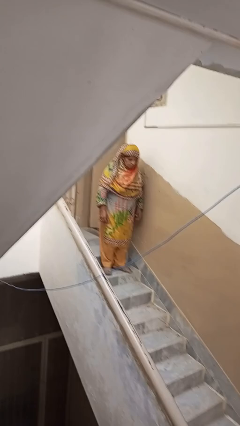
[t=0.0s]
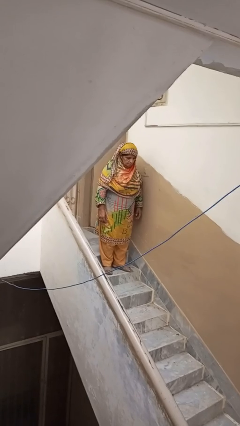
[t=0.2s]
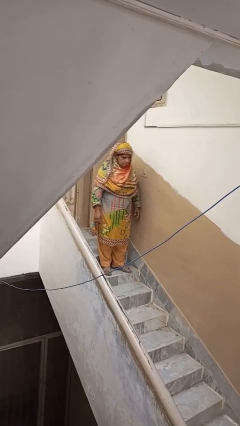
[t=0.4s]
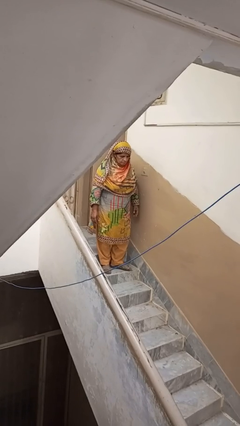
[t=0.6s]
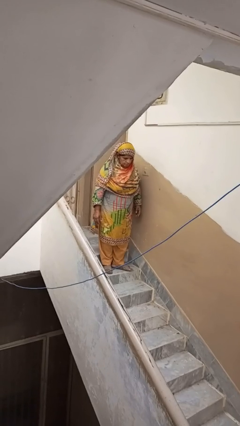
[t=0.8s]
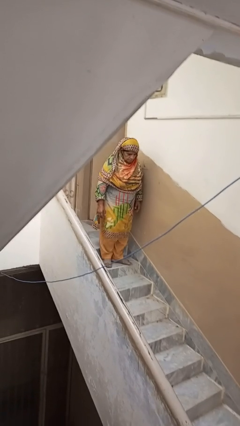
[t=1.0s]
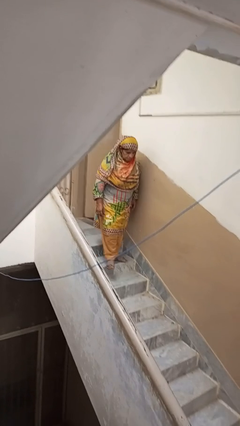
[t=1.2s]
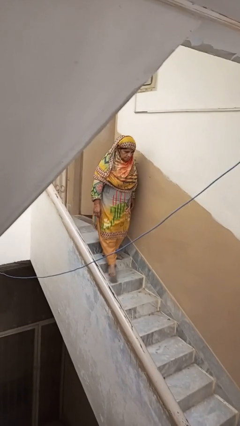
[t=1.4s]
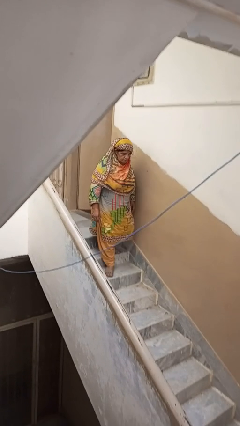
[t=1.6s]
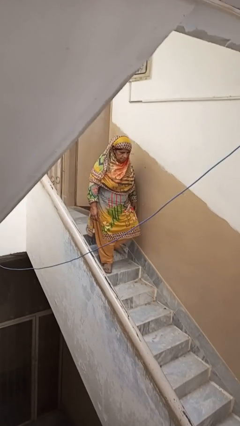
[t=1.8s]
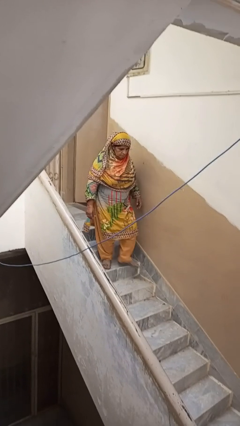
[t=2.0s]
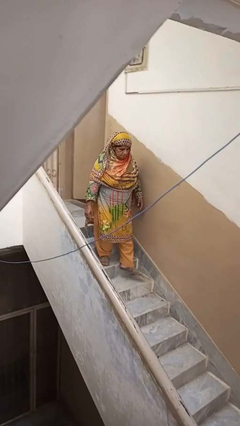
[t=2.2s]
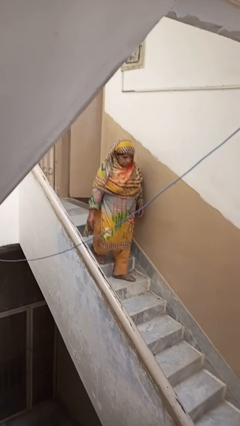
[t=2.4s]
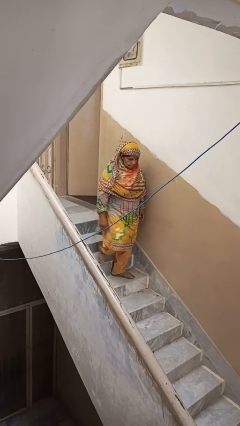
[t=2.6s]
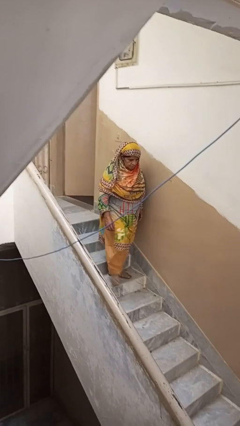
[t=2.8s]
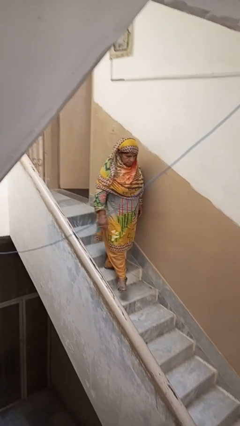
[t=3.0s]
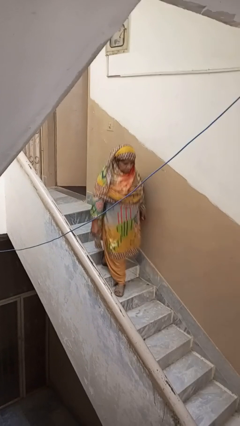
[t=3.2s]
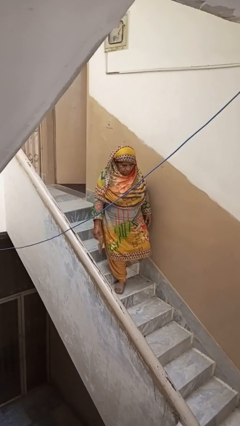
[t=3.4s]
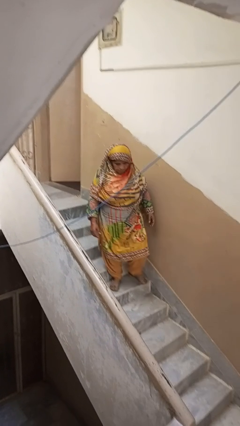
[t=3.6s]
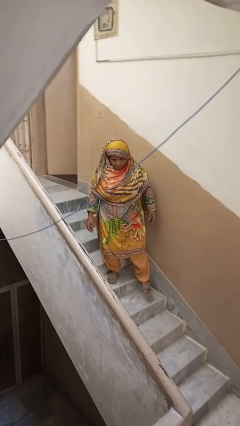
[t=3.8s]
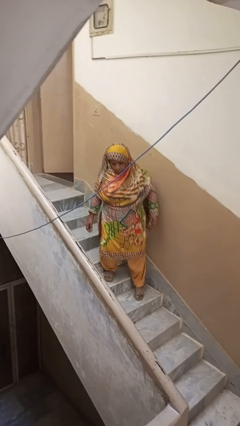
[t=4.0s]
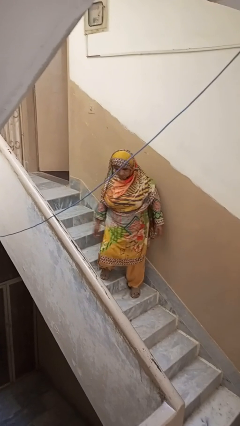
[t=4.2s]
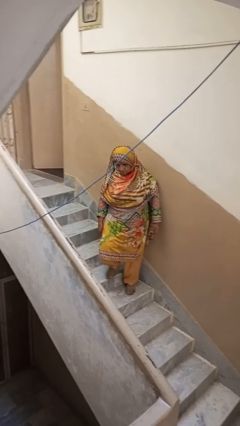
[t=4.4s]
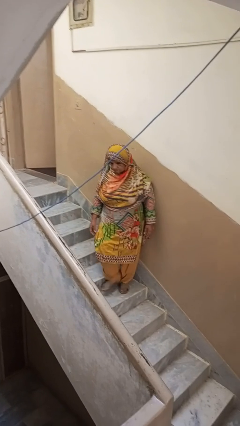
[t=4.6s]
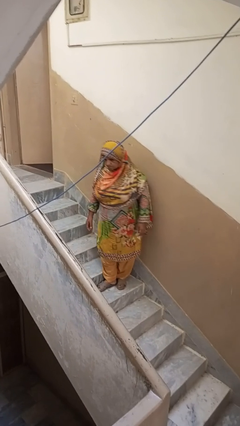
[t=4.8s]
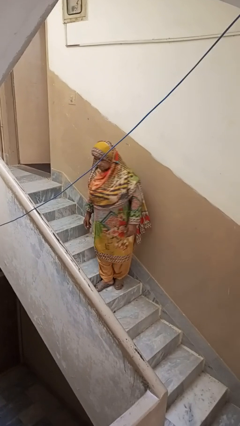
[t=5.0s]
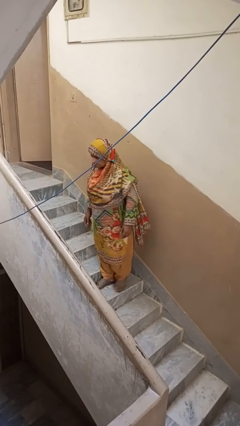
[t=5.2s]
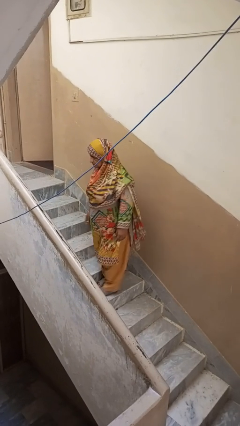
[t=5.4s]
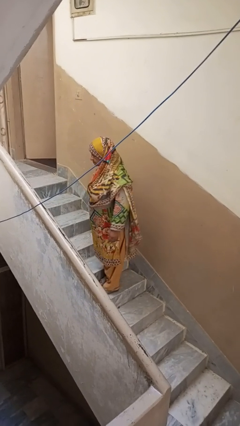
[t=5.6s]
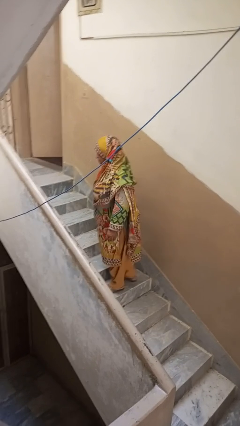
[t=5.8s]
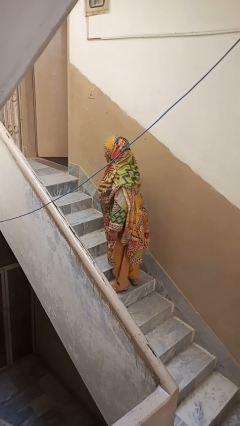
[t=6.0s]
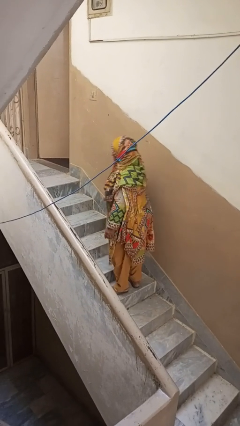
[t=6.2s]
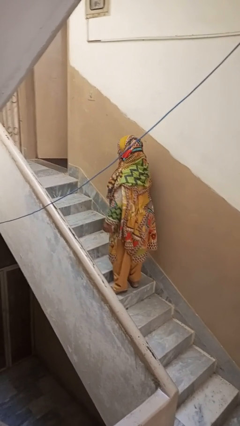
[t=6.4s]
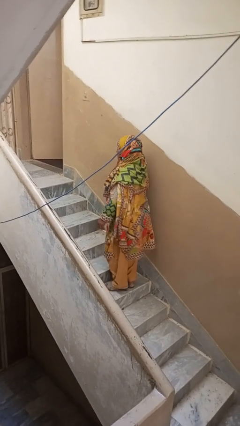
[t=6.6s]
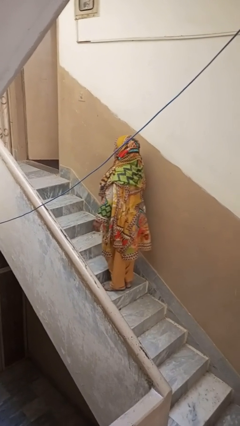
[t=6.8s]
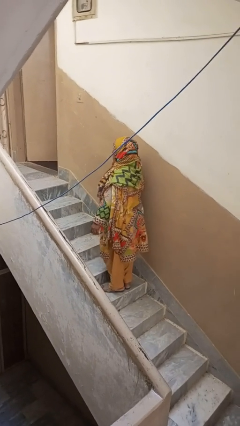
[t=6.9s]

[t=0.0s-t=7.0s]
person climbs down stairs

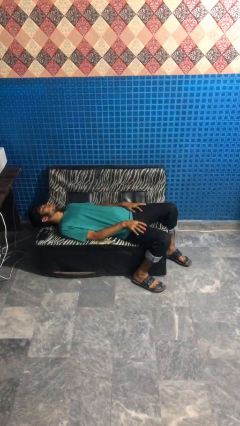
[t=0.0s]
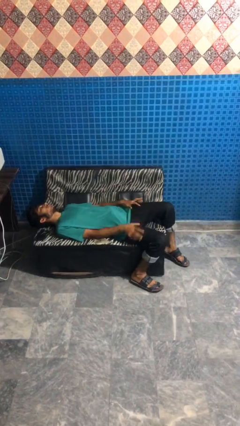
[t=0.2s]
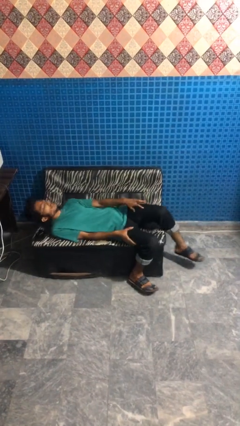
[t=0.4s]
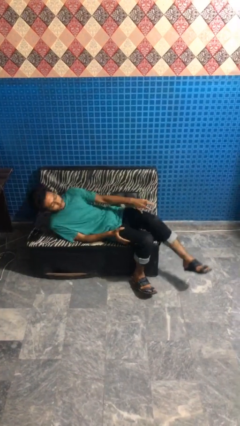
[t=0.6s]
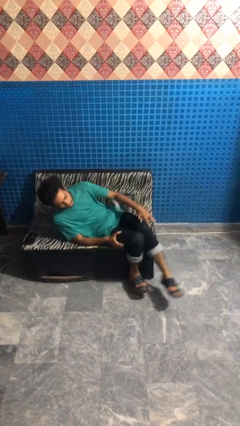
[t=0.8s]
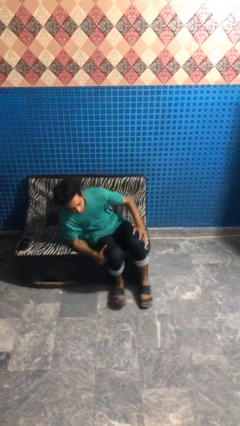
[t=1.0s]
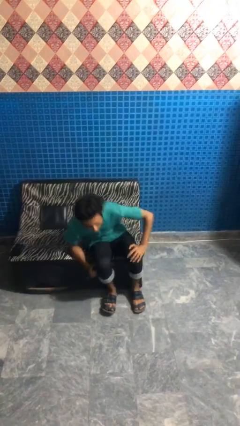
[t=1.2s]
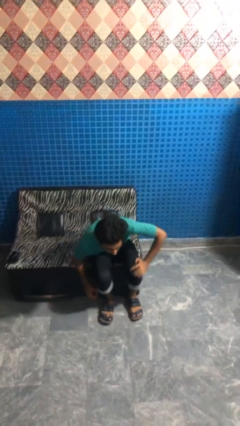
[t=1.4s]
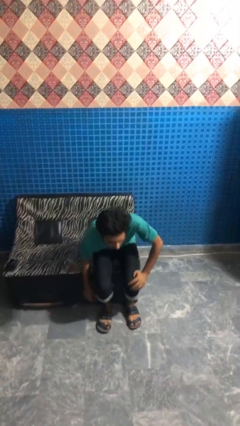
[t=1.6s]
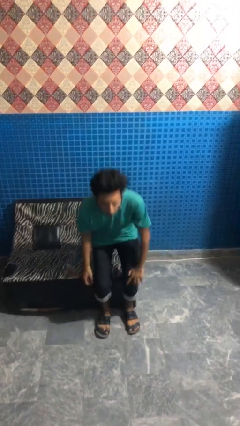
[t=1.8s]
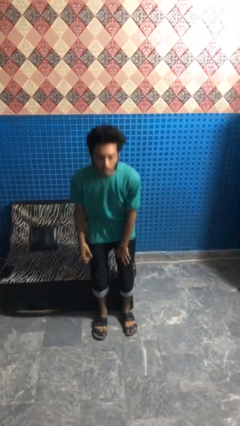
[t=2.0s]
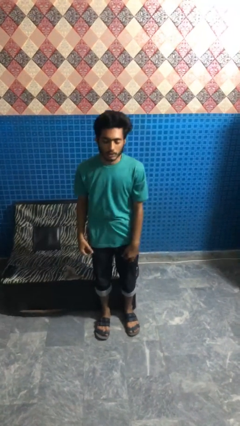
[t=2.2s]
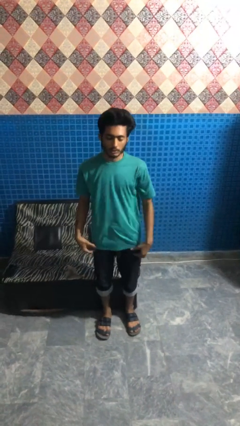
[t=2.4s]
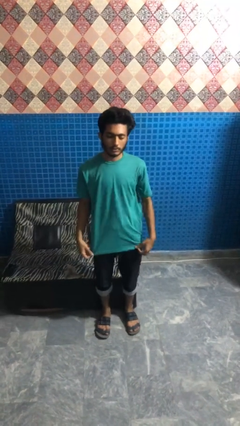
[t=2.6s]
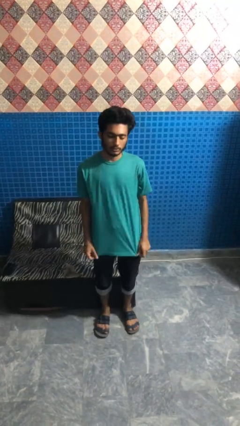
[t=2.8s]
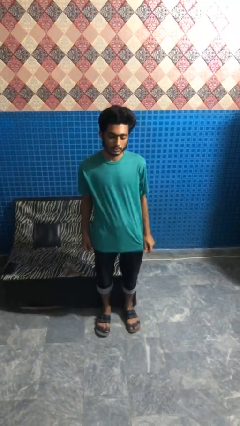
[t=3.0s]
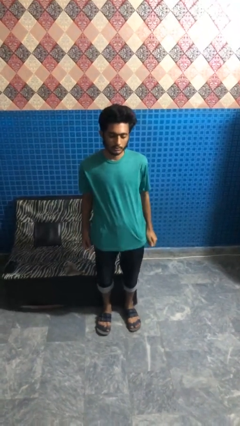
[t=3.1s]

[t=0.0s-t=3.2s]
person stands up

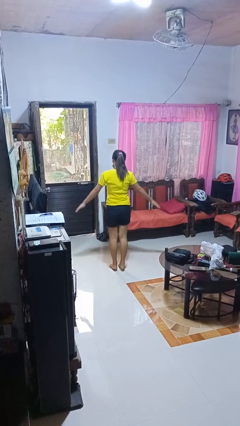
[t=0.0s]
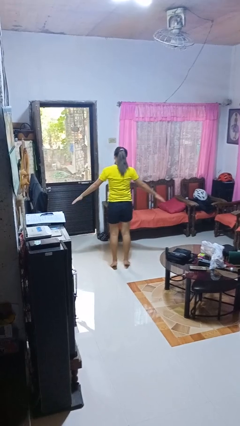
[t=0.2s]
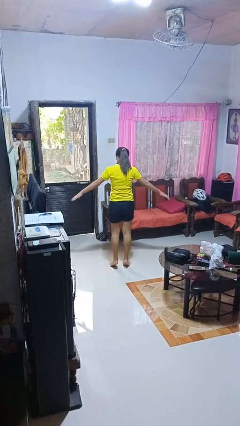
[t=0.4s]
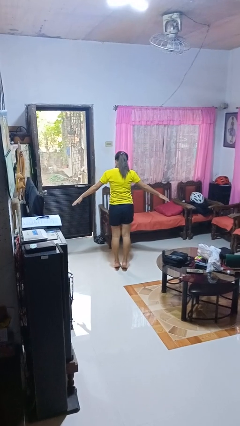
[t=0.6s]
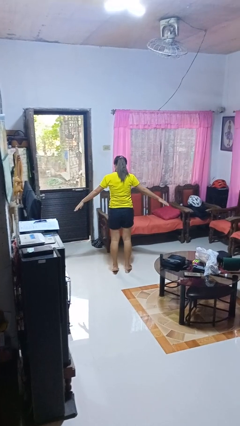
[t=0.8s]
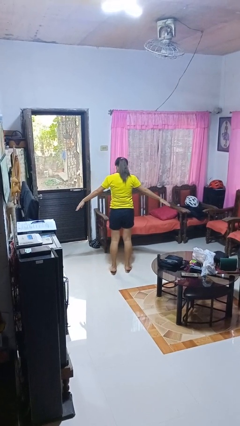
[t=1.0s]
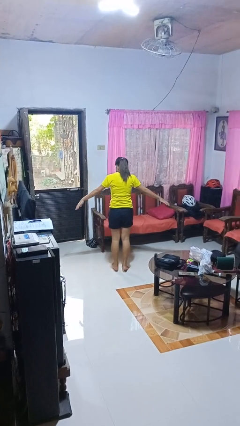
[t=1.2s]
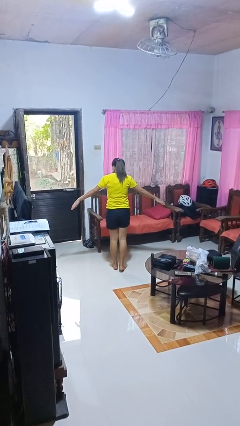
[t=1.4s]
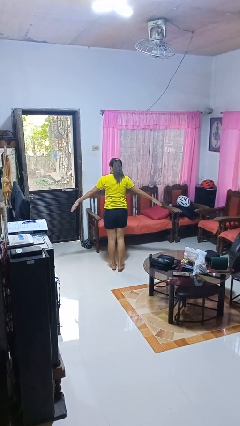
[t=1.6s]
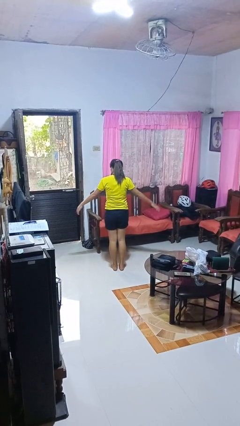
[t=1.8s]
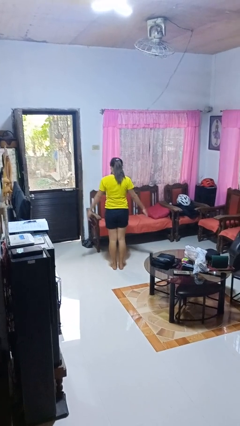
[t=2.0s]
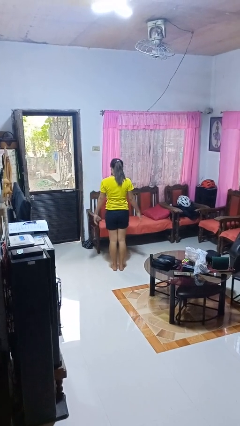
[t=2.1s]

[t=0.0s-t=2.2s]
person walks tiptoe

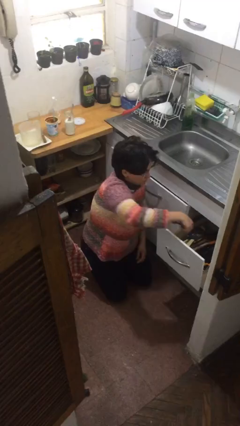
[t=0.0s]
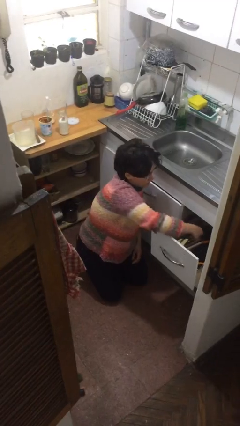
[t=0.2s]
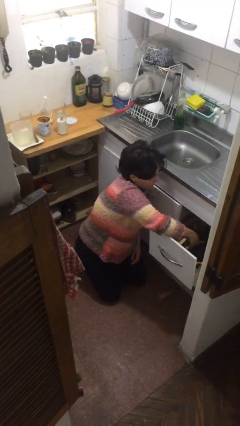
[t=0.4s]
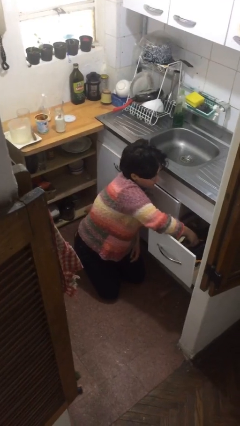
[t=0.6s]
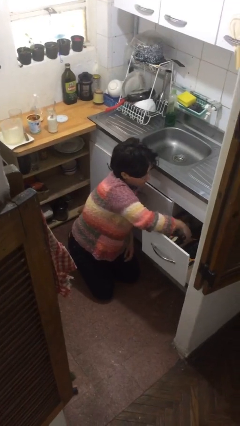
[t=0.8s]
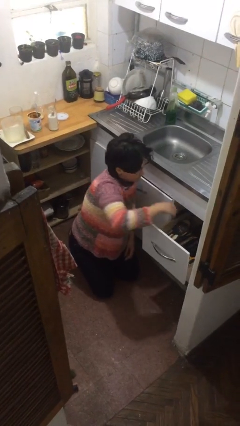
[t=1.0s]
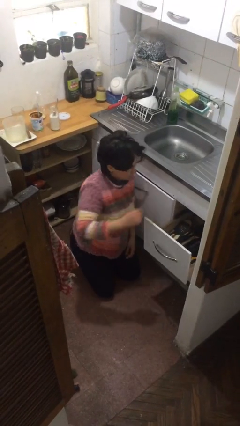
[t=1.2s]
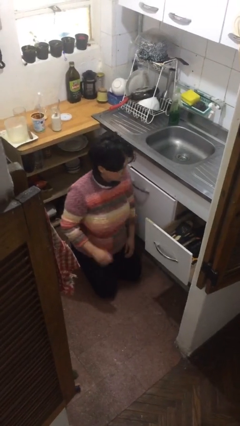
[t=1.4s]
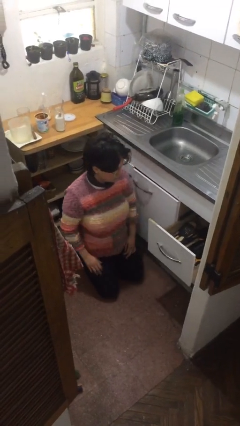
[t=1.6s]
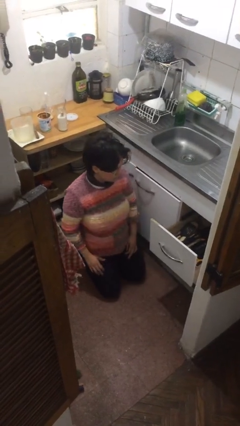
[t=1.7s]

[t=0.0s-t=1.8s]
person puts object into kitchen drawer

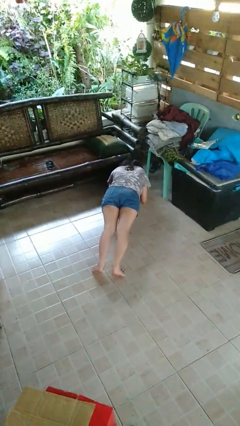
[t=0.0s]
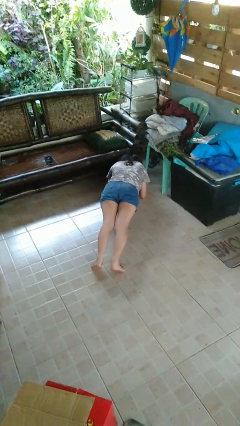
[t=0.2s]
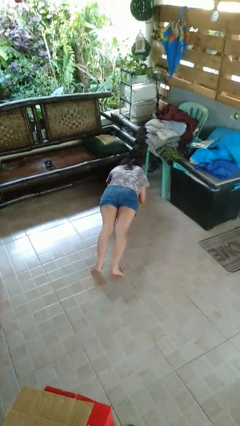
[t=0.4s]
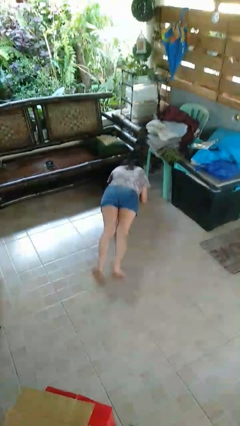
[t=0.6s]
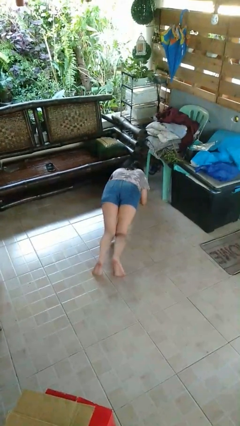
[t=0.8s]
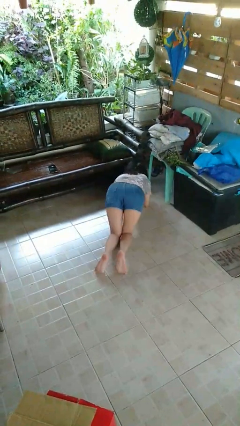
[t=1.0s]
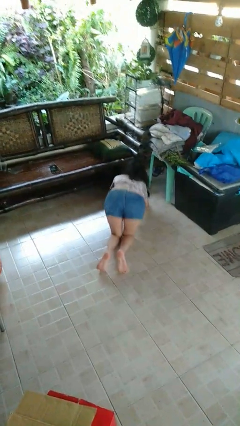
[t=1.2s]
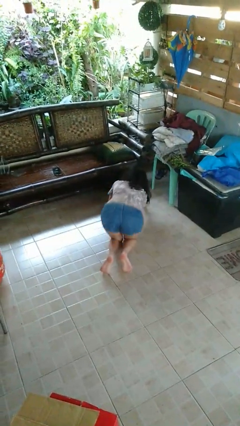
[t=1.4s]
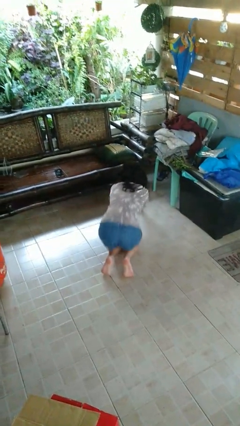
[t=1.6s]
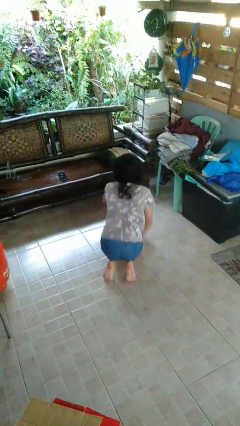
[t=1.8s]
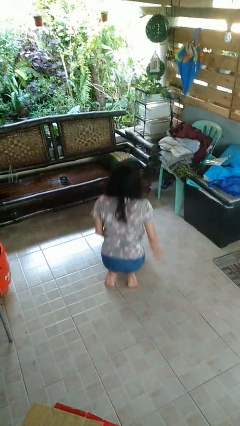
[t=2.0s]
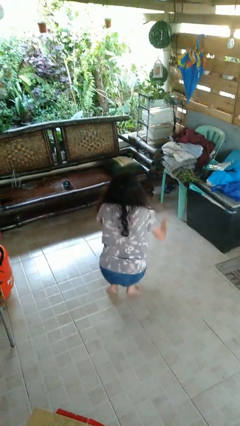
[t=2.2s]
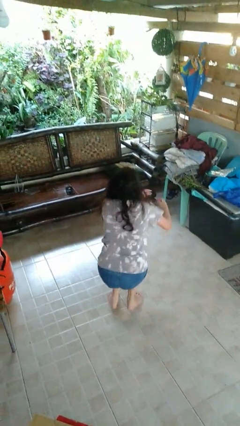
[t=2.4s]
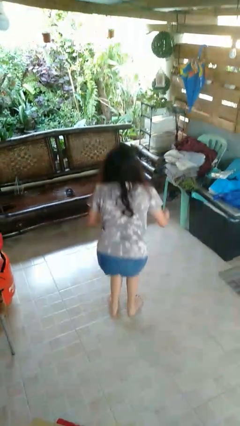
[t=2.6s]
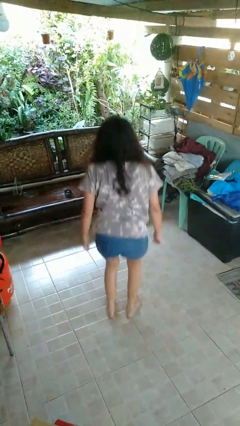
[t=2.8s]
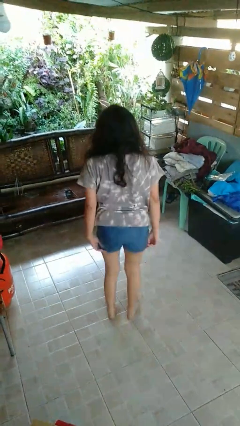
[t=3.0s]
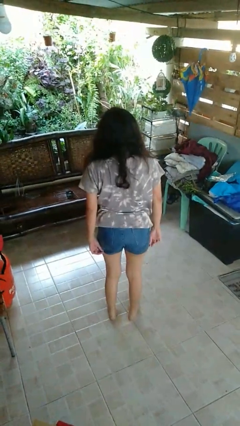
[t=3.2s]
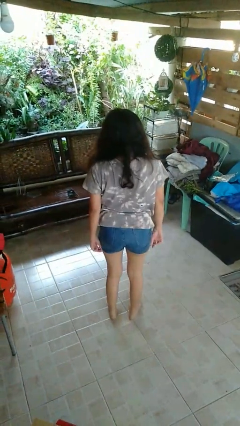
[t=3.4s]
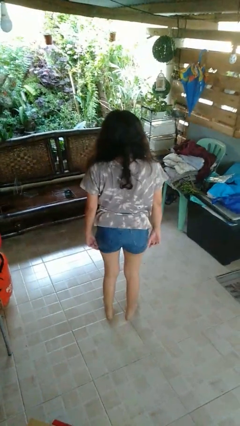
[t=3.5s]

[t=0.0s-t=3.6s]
person stands up from floor
